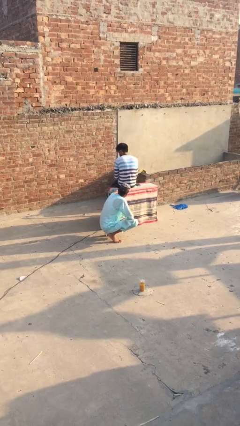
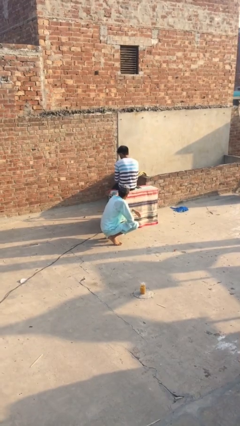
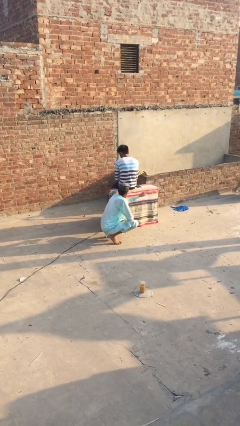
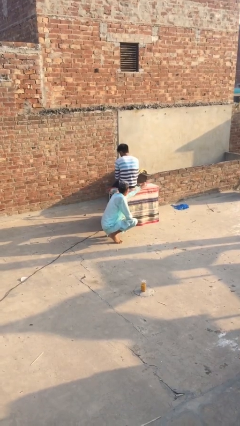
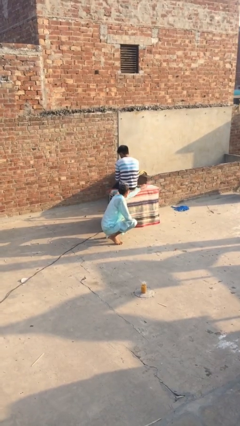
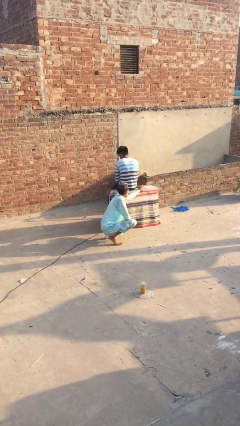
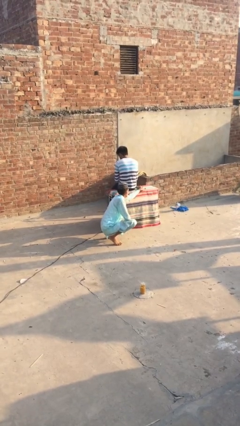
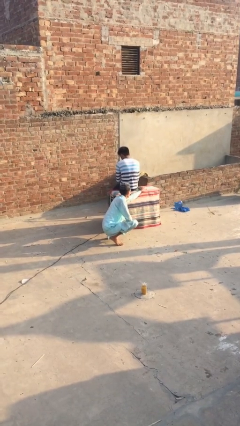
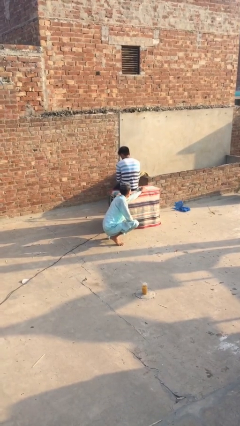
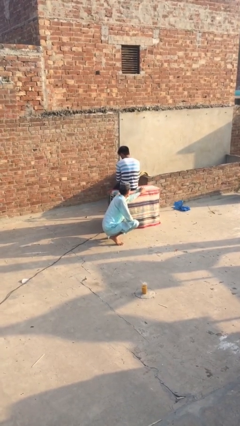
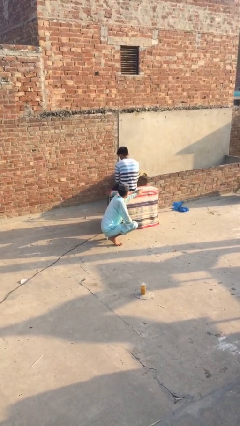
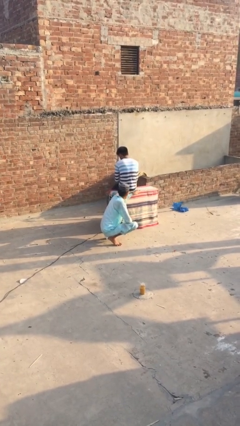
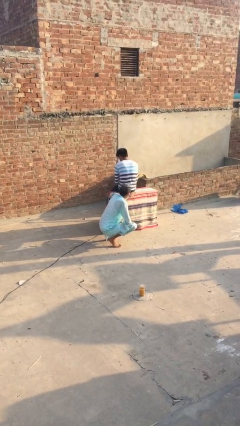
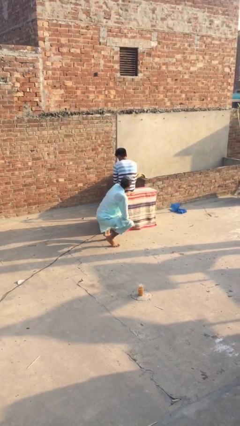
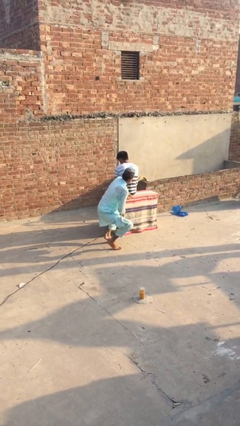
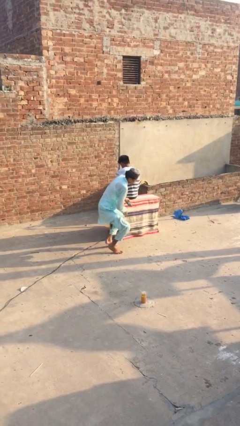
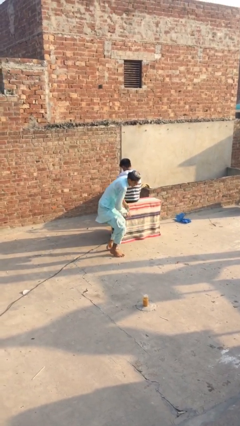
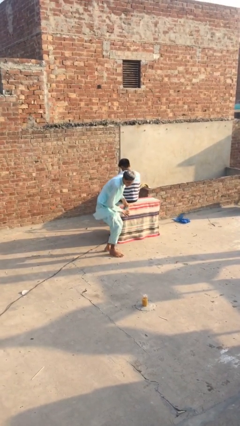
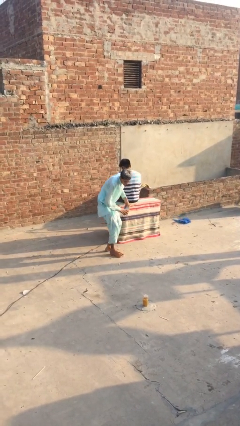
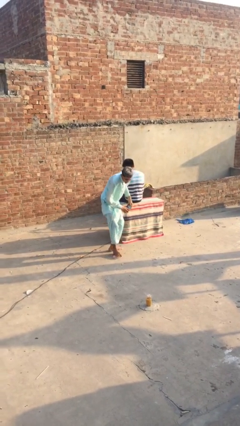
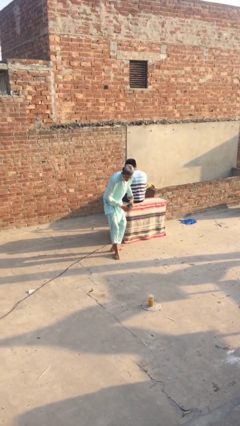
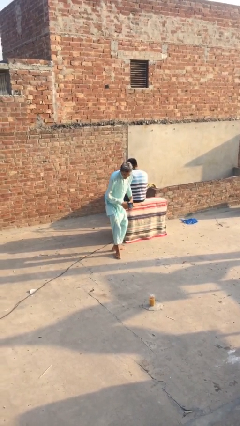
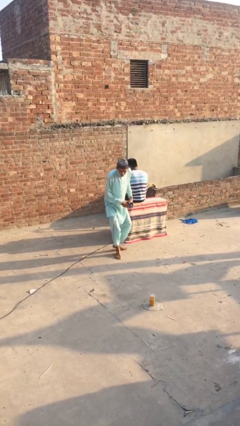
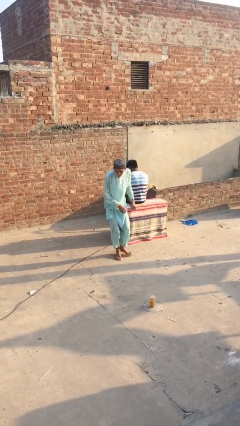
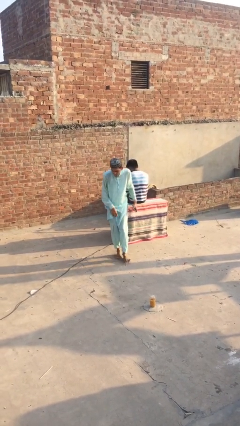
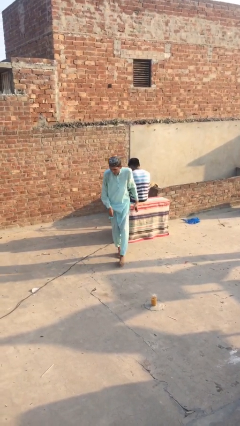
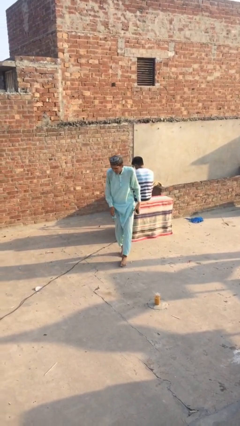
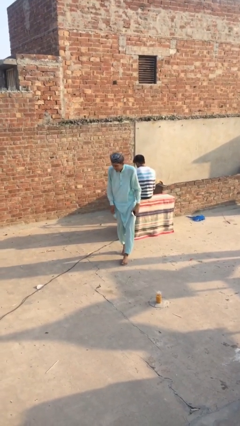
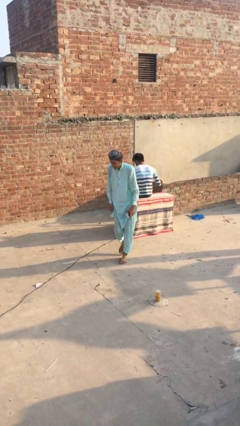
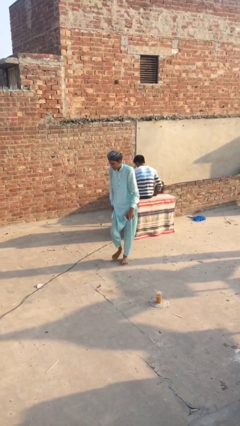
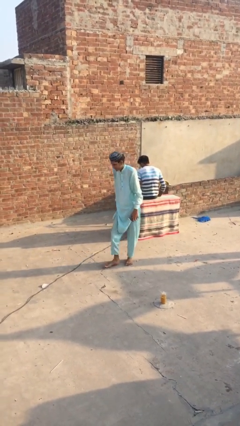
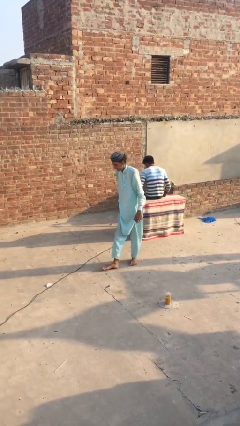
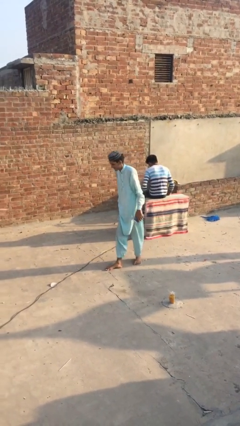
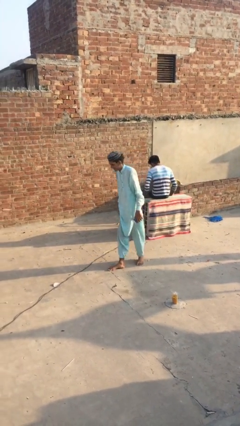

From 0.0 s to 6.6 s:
person steals object from person

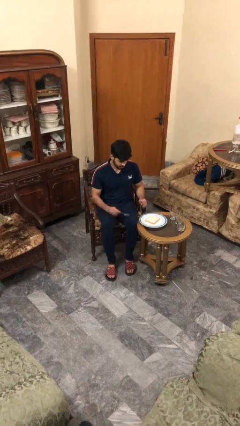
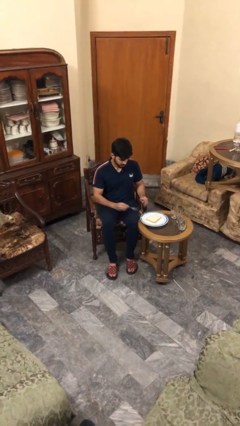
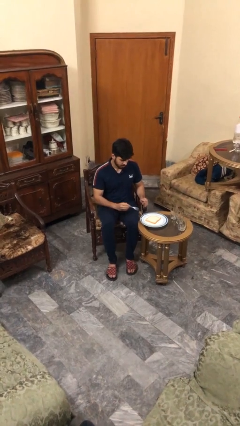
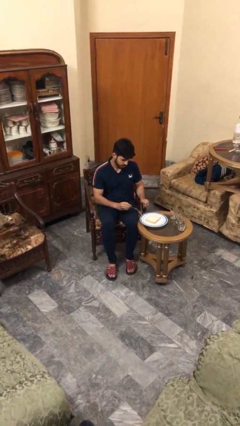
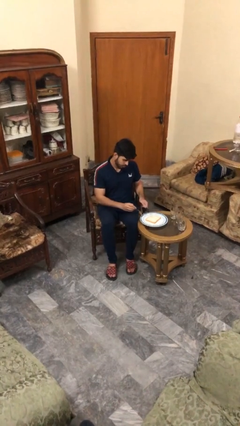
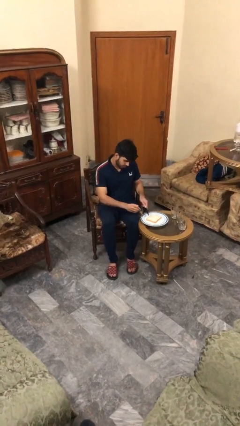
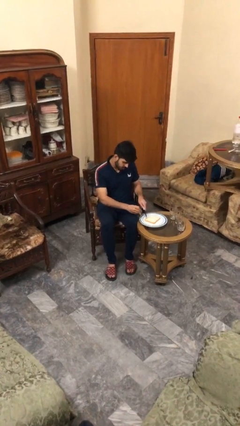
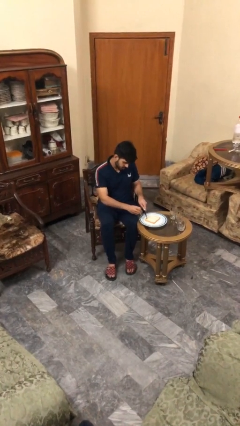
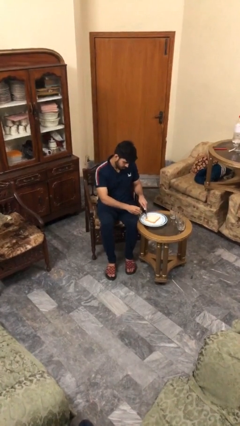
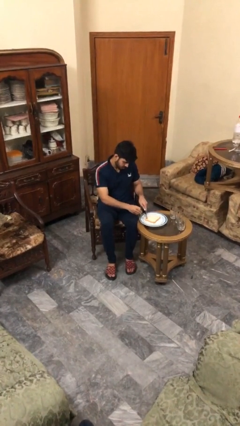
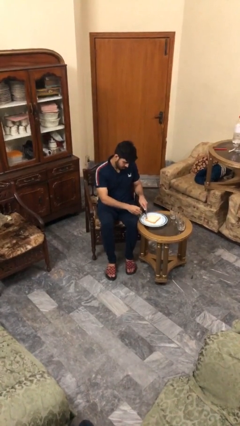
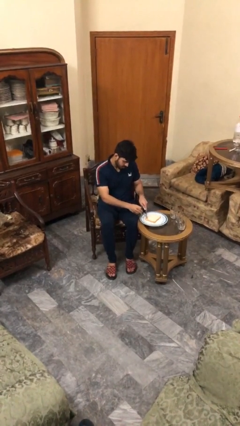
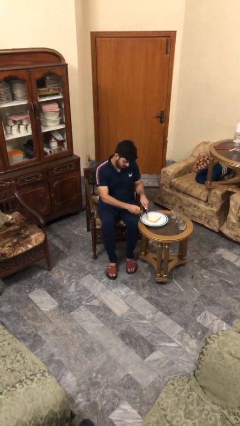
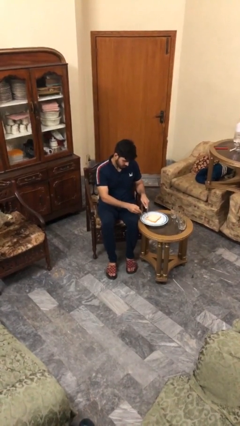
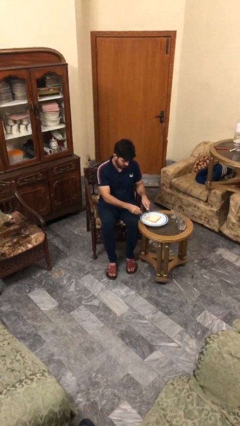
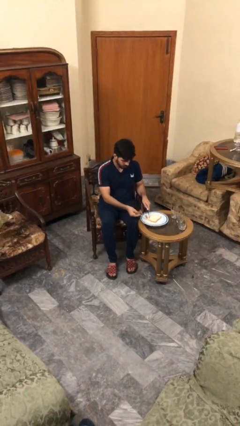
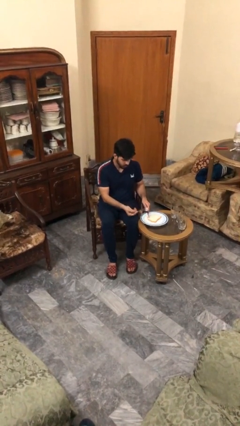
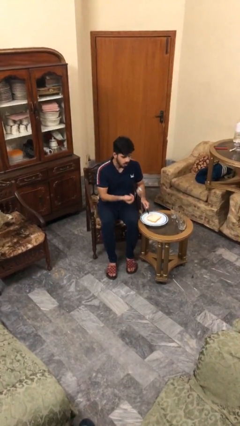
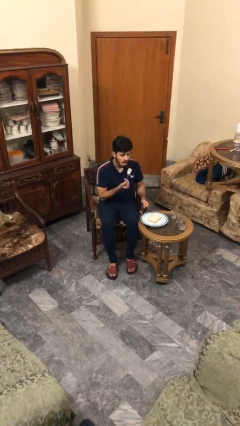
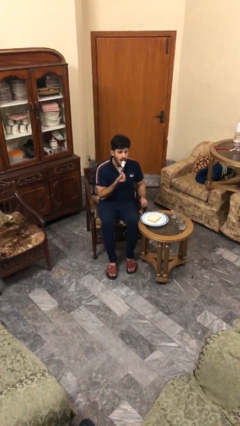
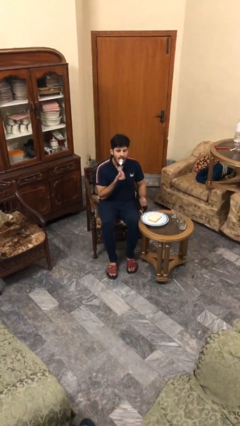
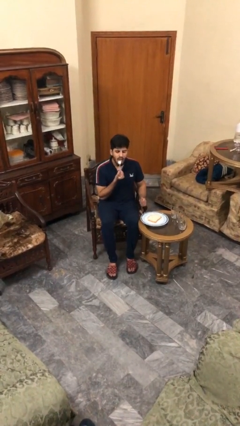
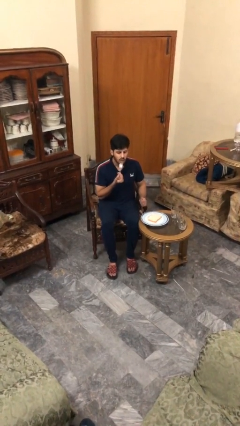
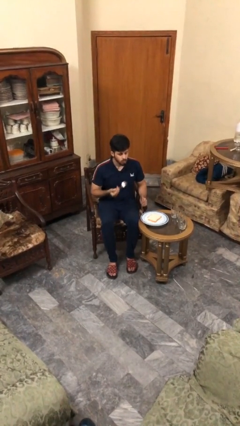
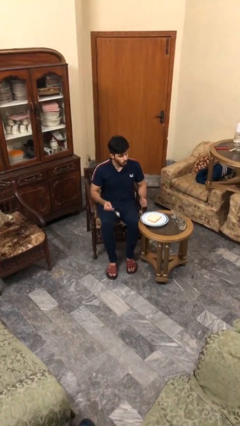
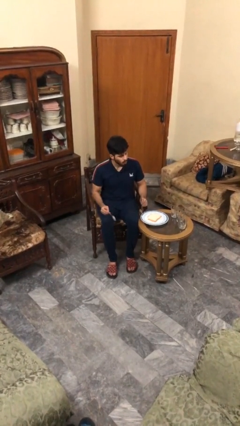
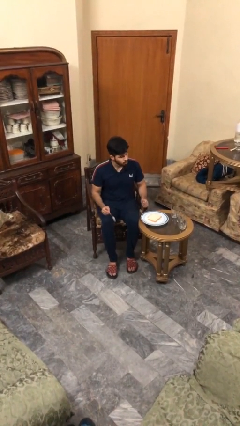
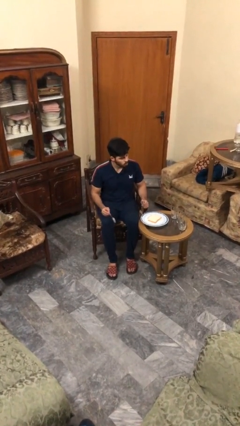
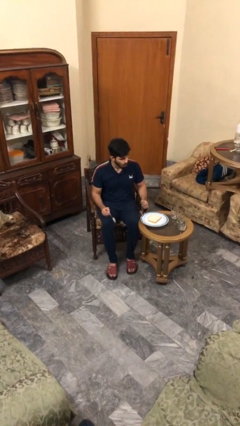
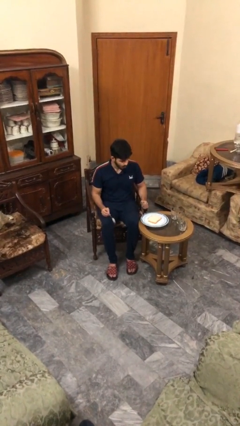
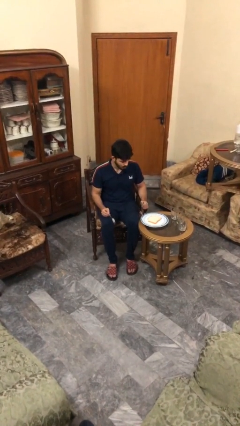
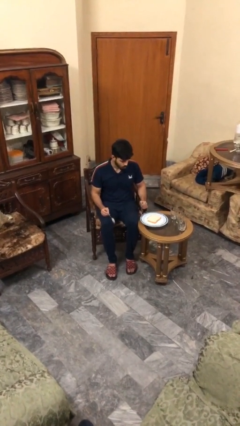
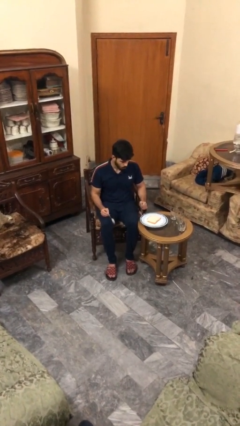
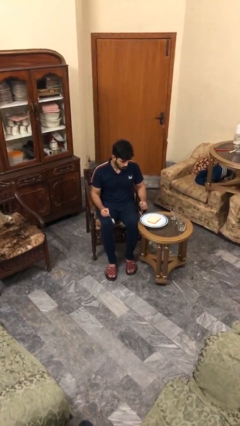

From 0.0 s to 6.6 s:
person eats with utensil

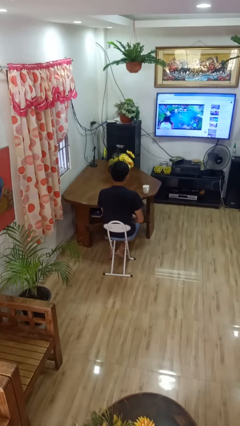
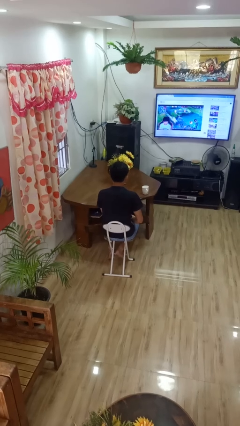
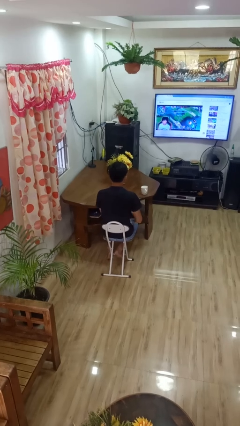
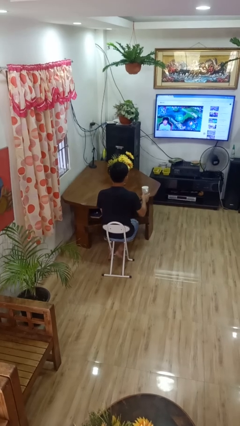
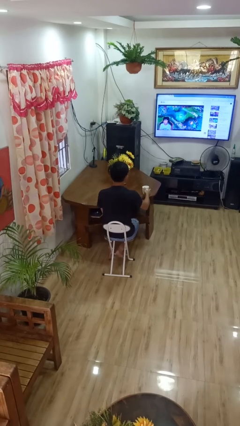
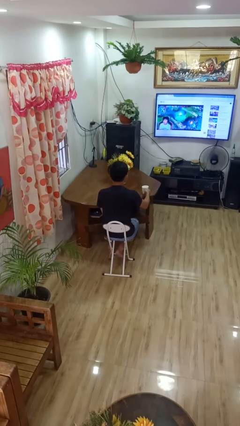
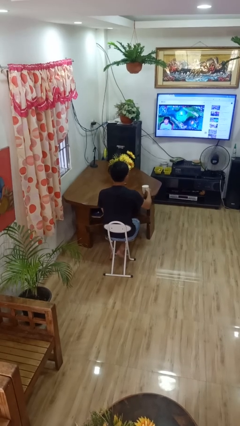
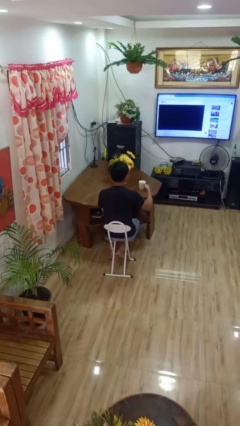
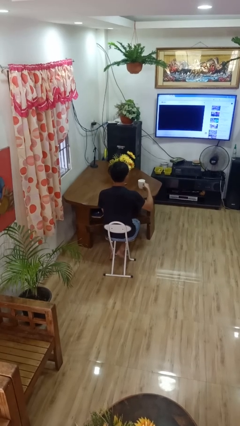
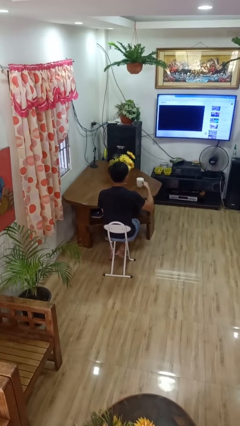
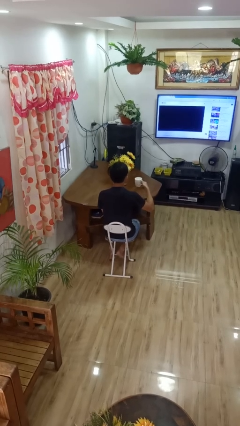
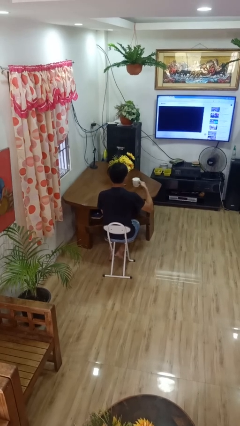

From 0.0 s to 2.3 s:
person picks up object from table

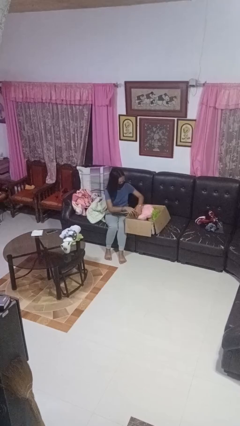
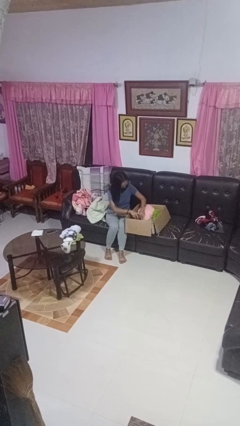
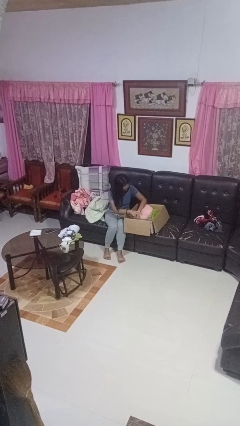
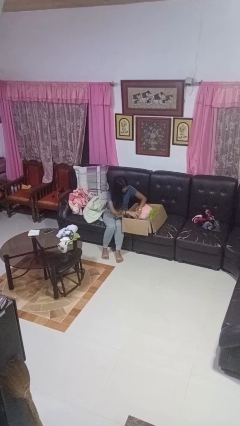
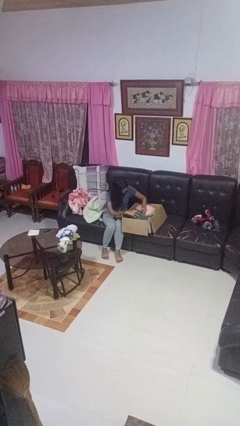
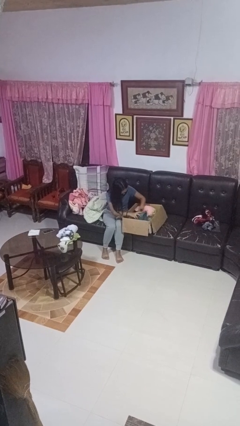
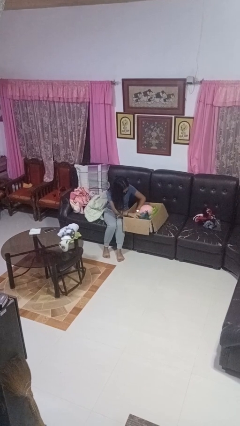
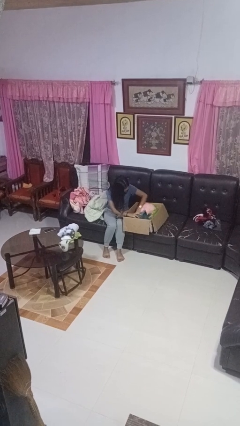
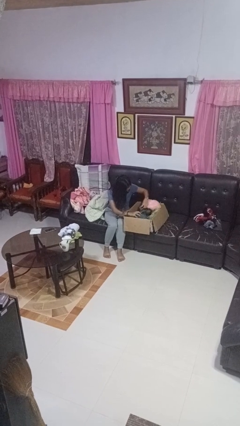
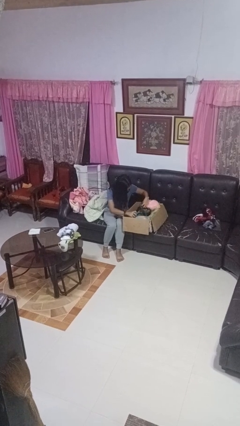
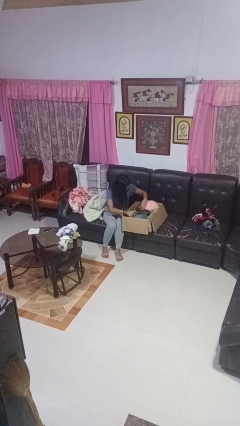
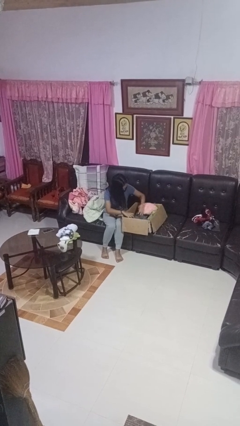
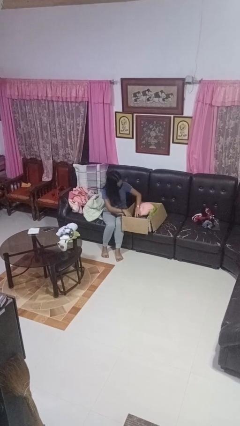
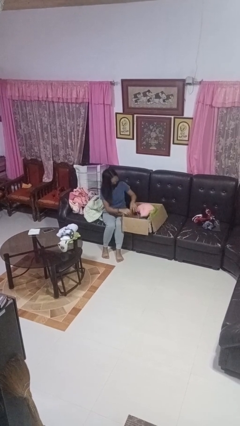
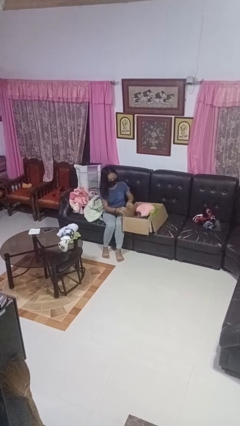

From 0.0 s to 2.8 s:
person searches in box
